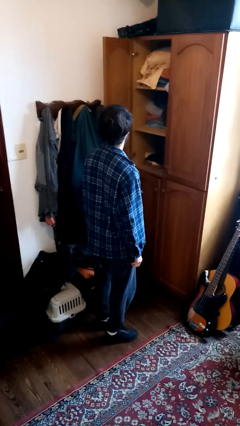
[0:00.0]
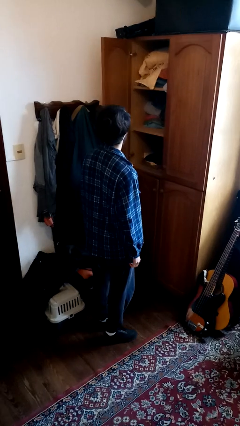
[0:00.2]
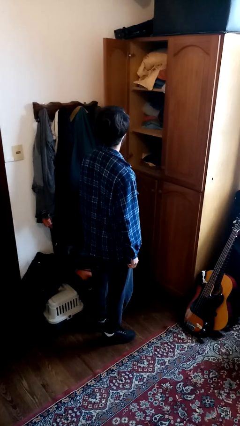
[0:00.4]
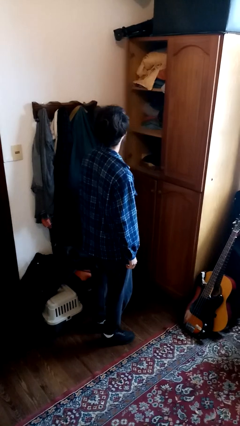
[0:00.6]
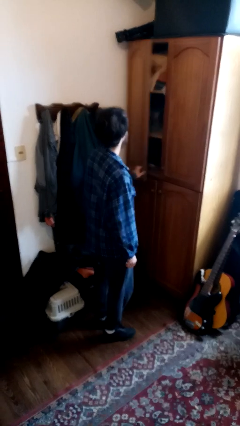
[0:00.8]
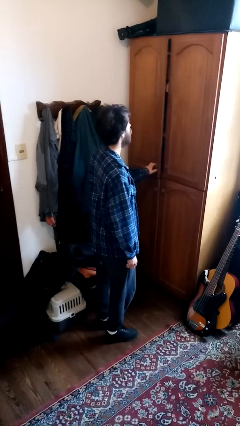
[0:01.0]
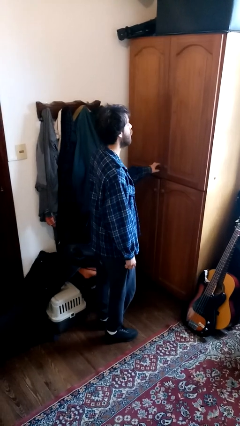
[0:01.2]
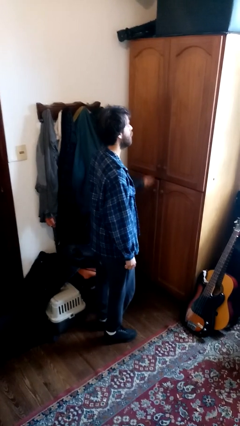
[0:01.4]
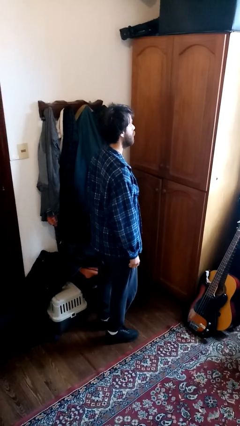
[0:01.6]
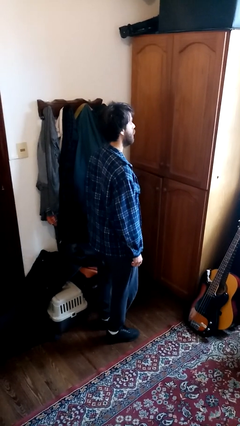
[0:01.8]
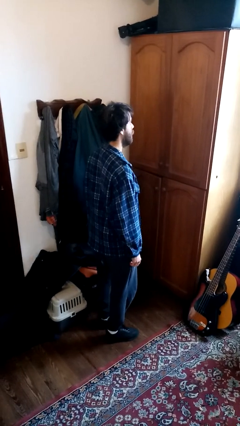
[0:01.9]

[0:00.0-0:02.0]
person closes dresser drawer

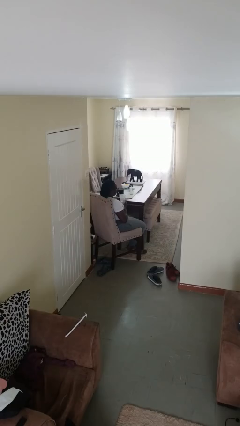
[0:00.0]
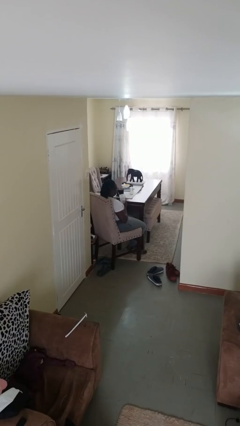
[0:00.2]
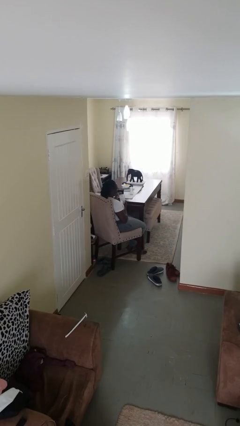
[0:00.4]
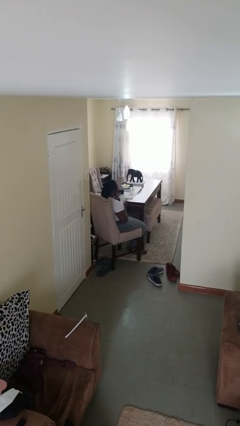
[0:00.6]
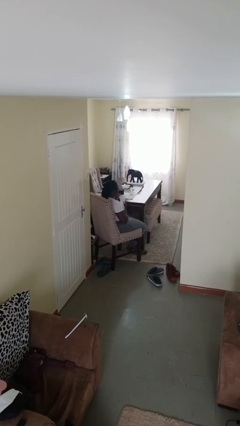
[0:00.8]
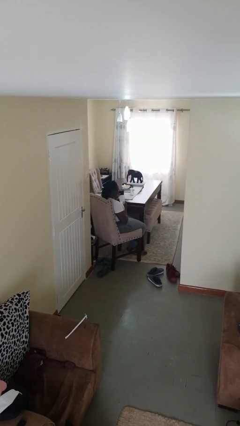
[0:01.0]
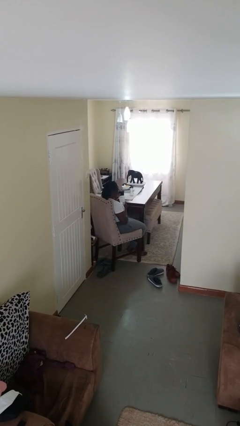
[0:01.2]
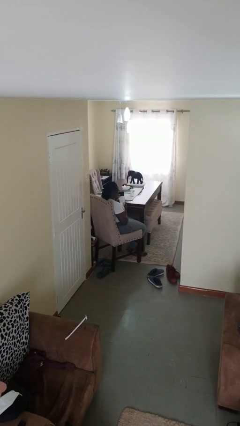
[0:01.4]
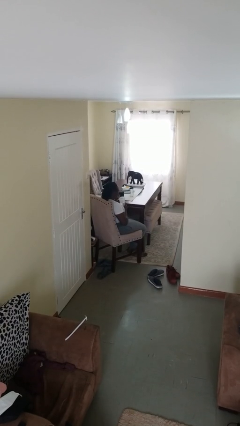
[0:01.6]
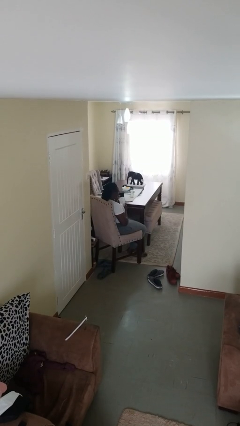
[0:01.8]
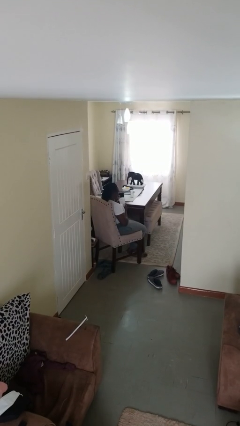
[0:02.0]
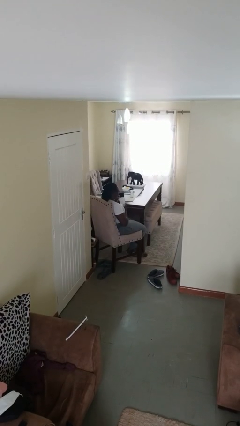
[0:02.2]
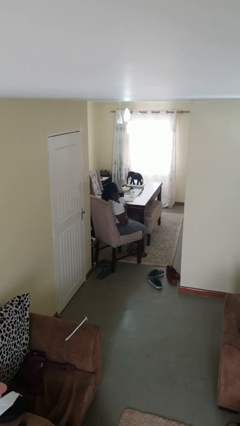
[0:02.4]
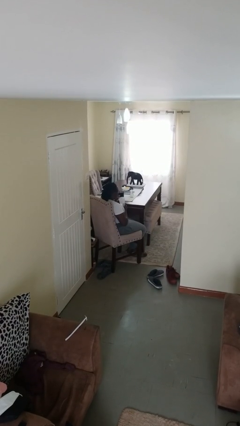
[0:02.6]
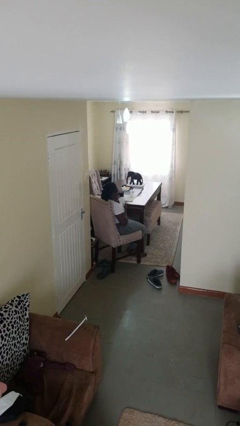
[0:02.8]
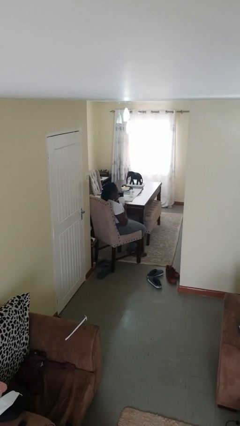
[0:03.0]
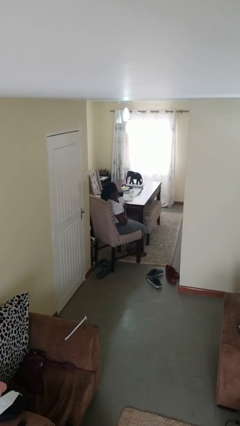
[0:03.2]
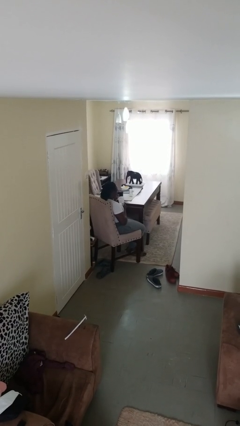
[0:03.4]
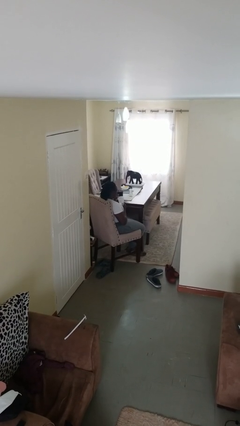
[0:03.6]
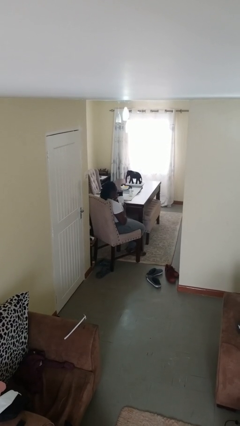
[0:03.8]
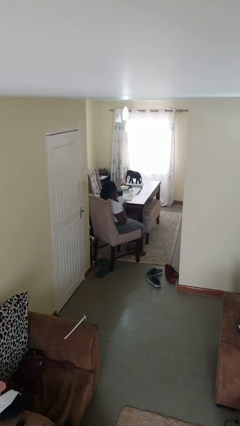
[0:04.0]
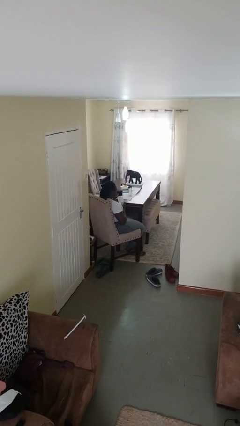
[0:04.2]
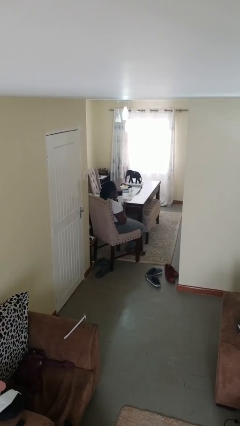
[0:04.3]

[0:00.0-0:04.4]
person drinks from straw

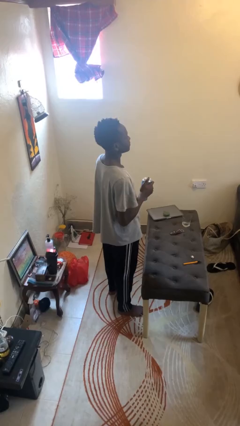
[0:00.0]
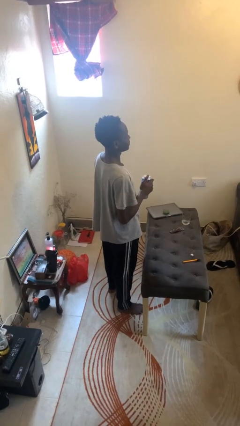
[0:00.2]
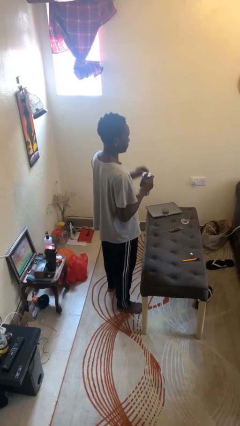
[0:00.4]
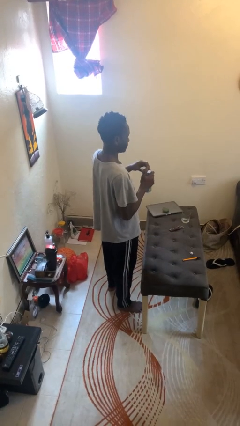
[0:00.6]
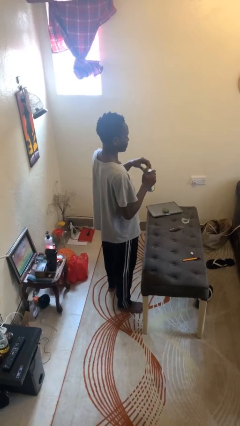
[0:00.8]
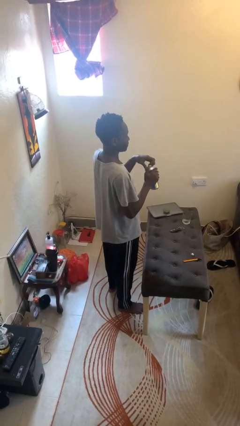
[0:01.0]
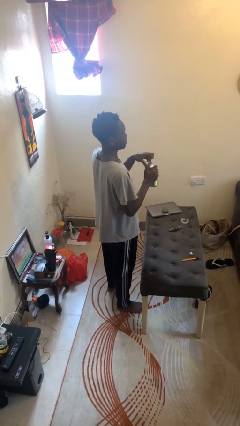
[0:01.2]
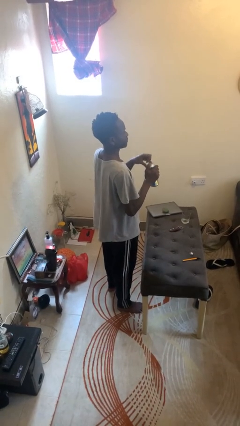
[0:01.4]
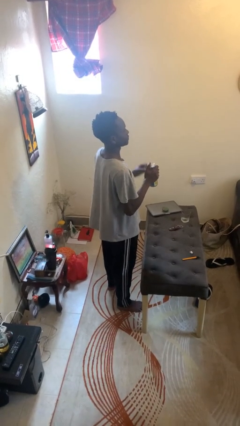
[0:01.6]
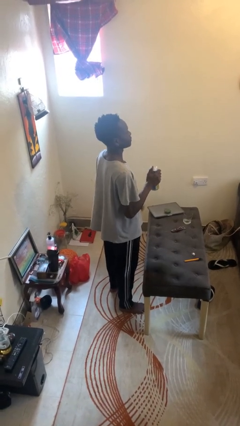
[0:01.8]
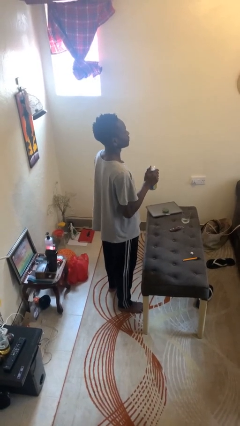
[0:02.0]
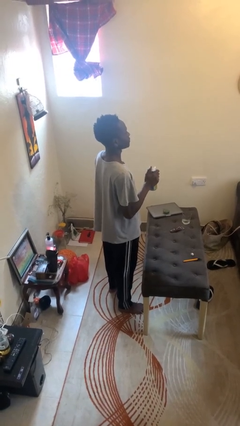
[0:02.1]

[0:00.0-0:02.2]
person opens beverage can

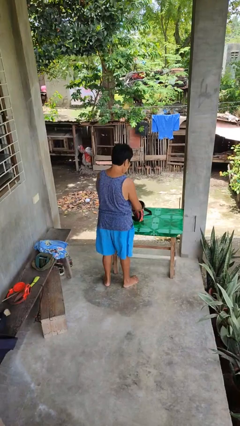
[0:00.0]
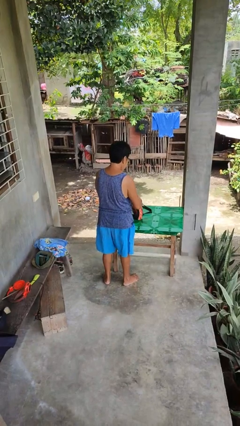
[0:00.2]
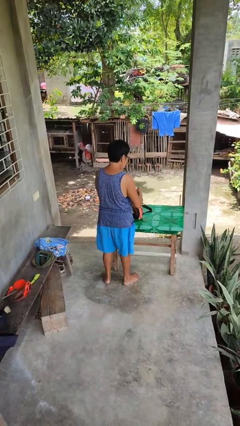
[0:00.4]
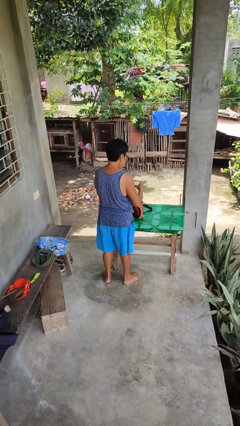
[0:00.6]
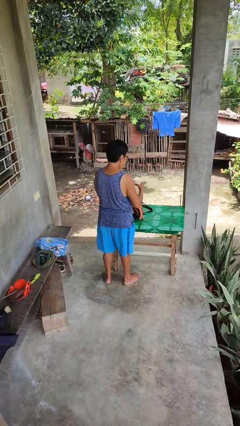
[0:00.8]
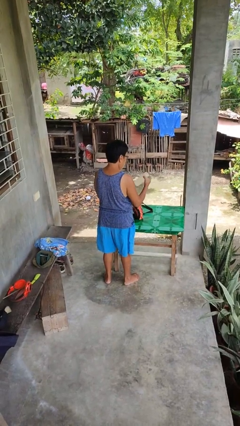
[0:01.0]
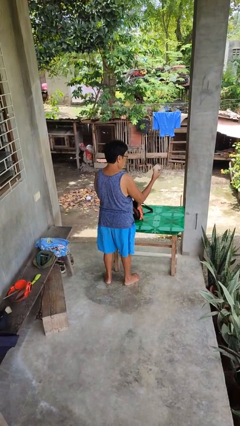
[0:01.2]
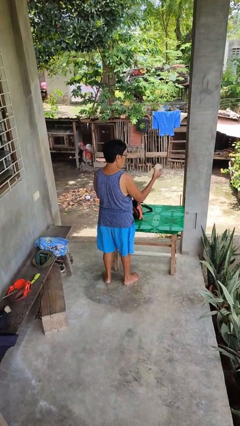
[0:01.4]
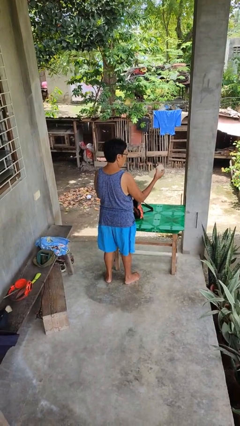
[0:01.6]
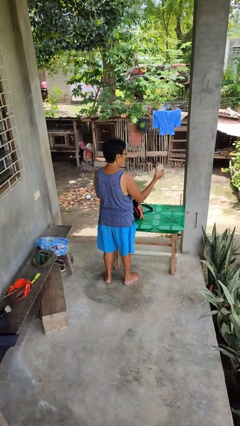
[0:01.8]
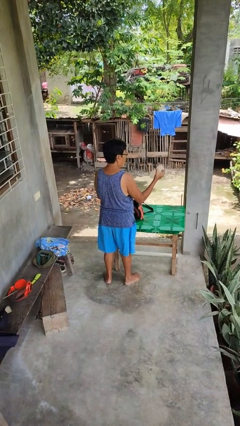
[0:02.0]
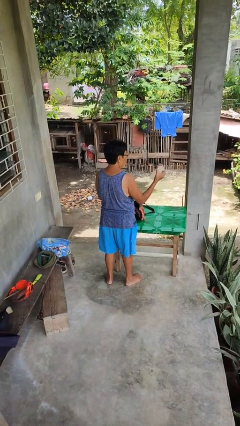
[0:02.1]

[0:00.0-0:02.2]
person takes object from purse

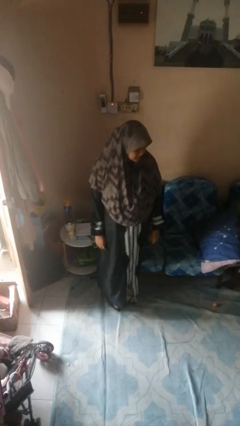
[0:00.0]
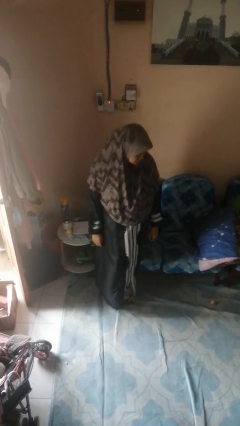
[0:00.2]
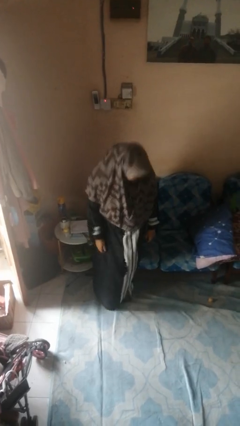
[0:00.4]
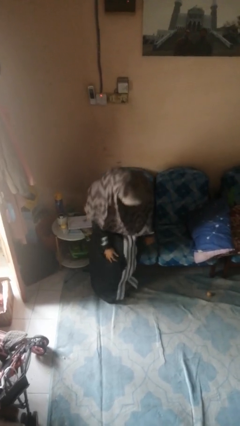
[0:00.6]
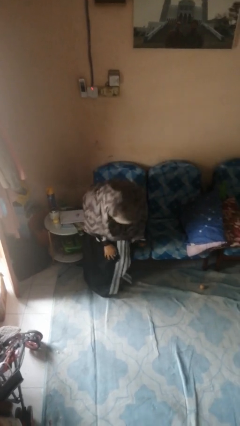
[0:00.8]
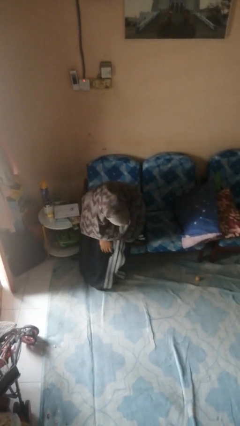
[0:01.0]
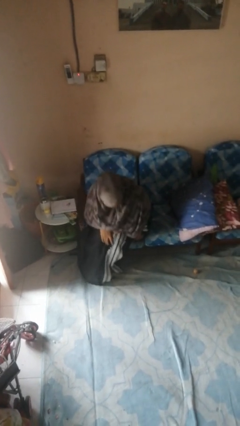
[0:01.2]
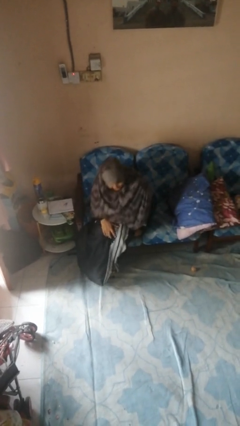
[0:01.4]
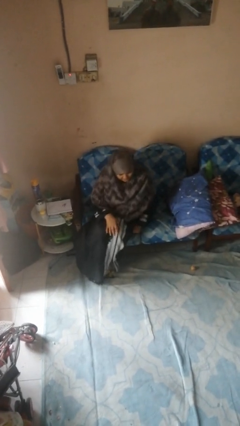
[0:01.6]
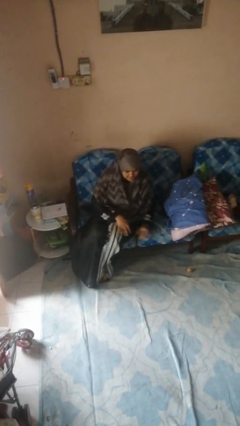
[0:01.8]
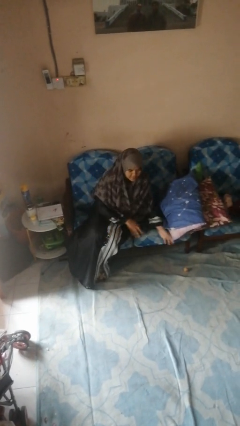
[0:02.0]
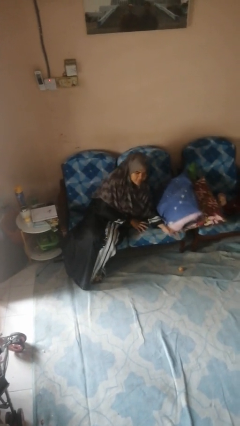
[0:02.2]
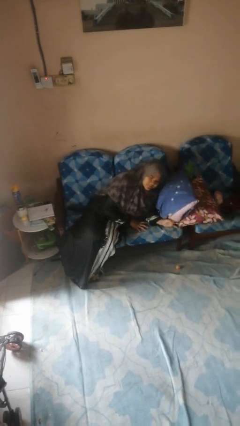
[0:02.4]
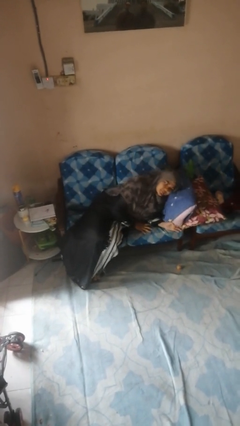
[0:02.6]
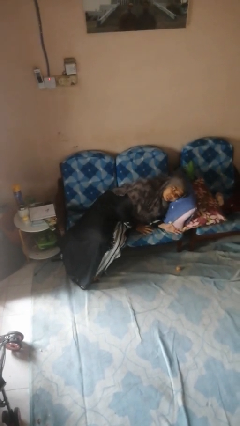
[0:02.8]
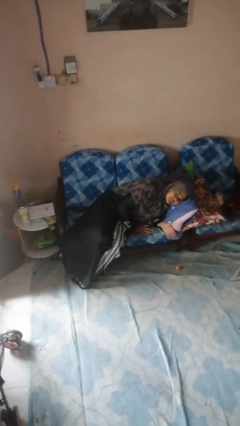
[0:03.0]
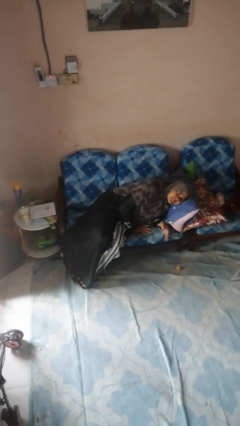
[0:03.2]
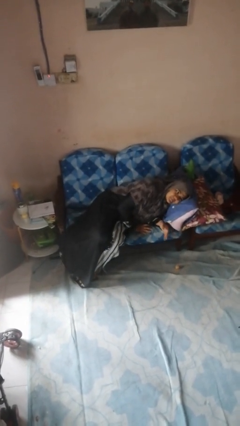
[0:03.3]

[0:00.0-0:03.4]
person lies down on couch

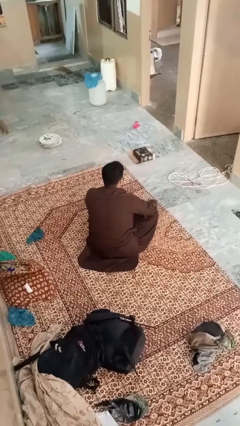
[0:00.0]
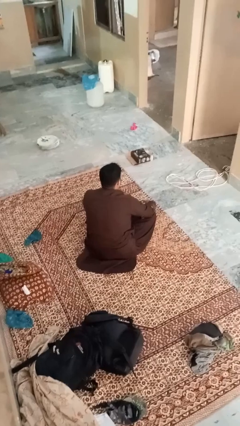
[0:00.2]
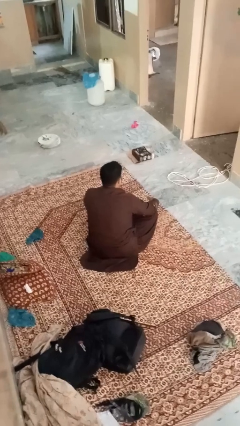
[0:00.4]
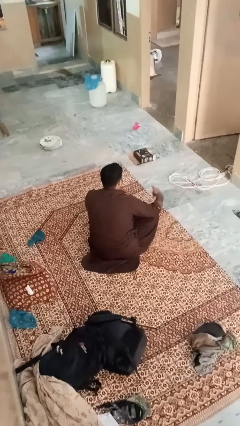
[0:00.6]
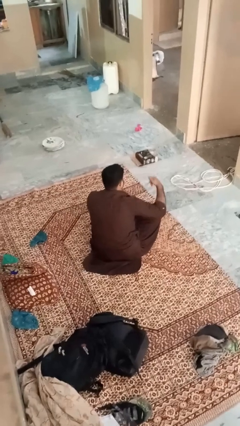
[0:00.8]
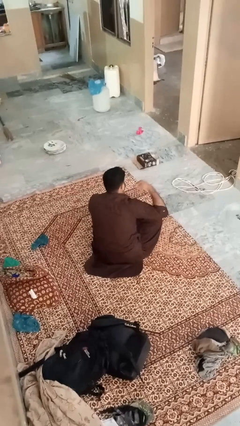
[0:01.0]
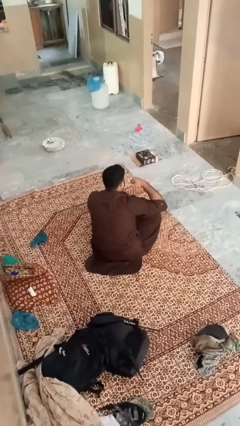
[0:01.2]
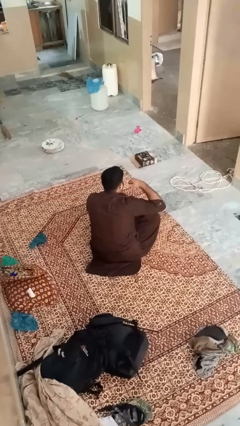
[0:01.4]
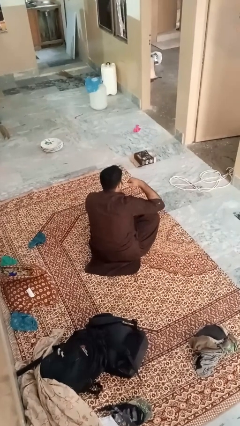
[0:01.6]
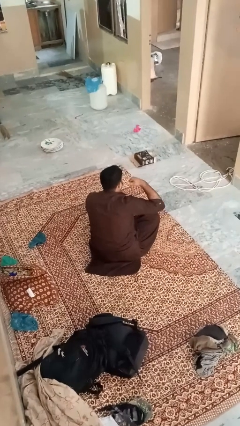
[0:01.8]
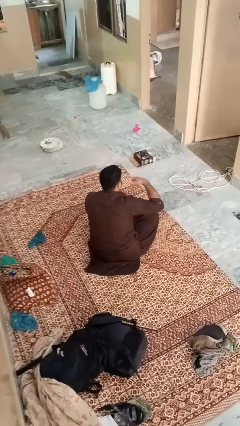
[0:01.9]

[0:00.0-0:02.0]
person gestures call me

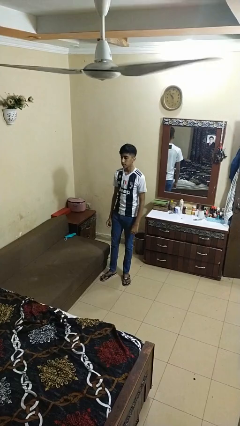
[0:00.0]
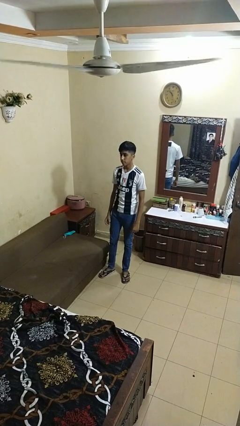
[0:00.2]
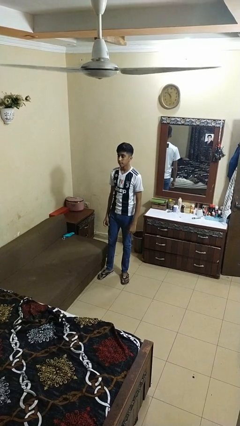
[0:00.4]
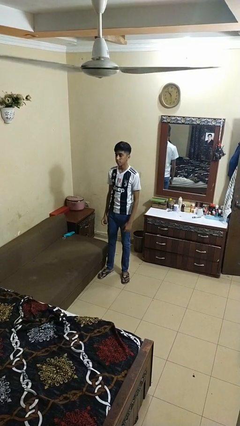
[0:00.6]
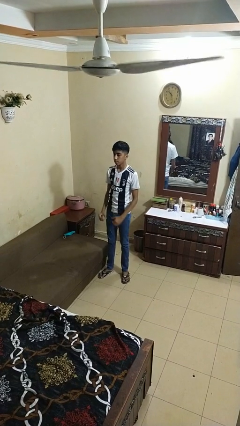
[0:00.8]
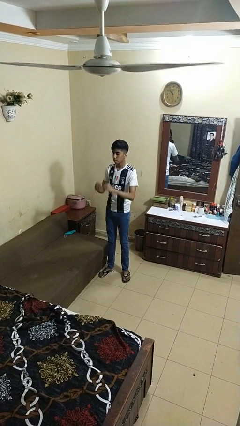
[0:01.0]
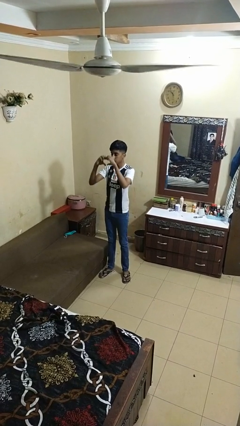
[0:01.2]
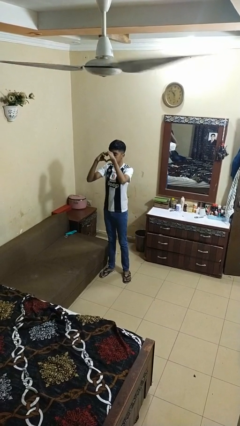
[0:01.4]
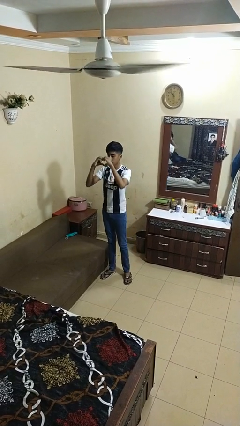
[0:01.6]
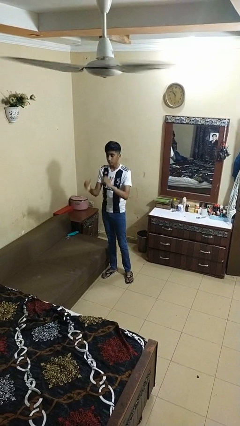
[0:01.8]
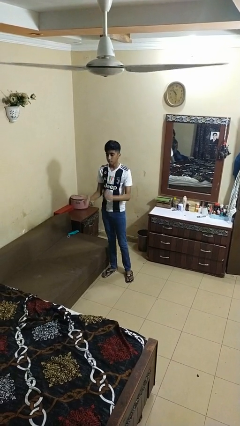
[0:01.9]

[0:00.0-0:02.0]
person gestures heart
